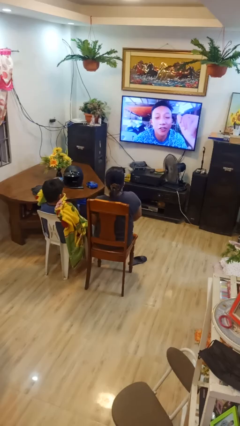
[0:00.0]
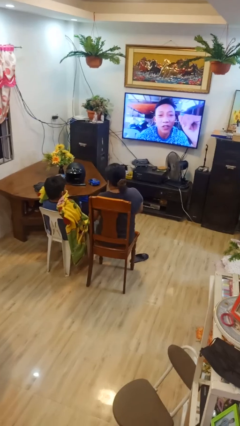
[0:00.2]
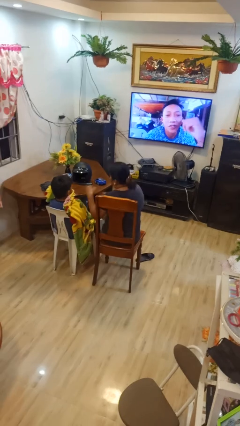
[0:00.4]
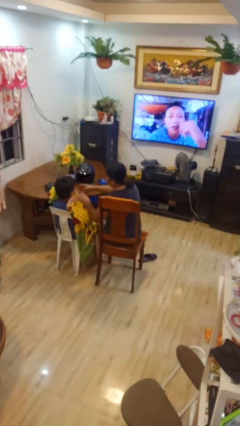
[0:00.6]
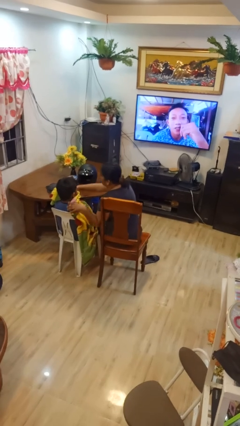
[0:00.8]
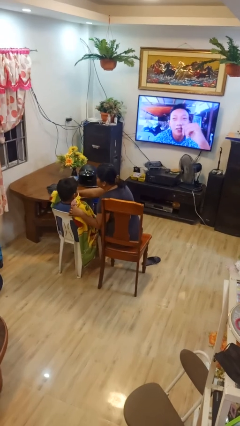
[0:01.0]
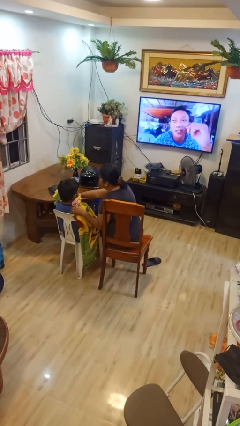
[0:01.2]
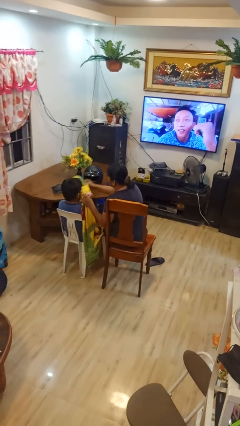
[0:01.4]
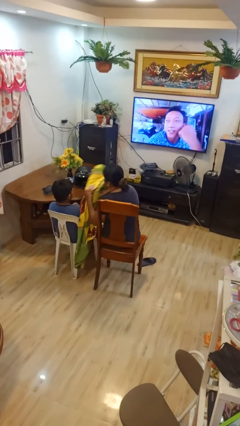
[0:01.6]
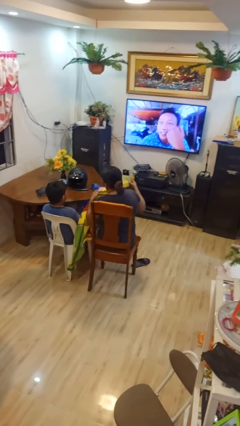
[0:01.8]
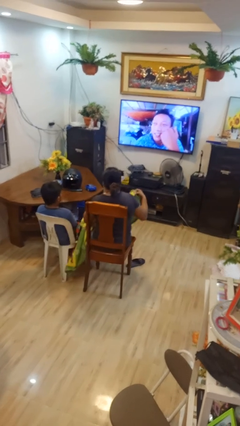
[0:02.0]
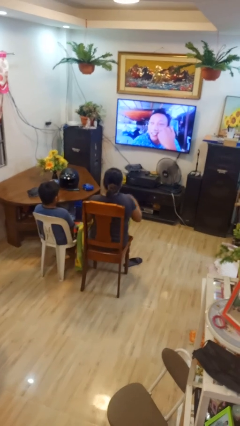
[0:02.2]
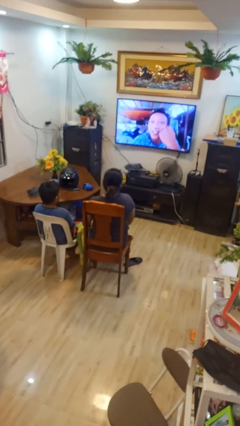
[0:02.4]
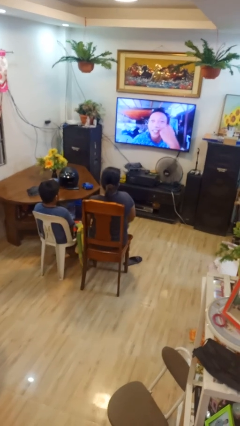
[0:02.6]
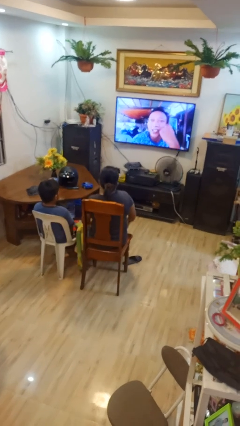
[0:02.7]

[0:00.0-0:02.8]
person uncovers friend with blanket

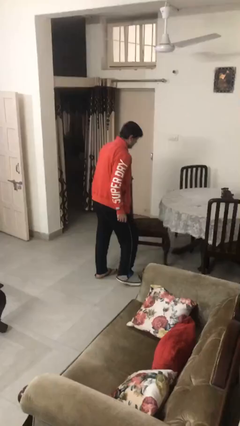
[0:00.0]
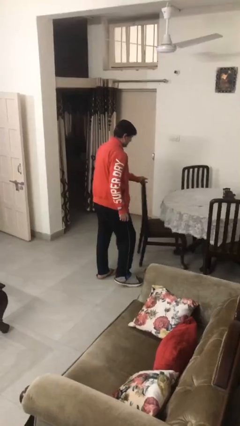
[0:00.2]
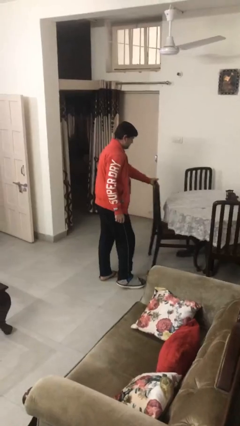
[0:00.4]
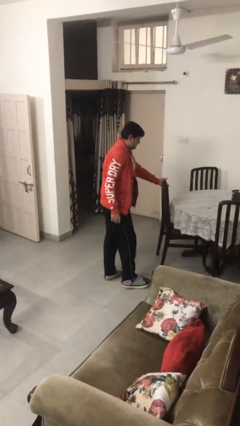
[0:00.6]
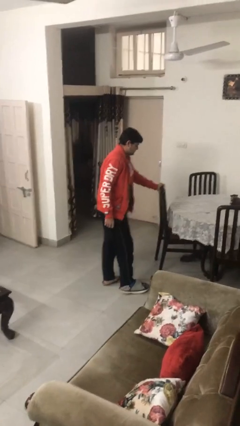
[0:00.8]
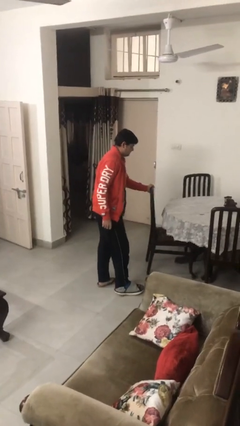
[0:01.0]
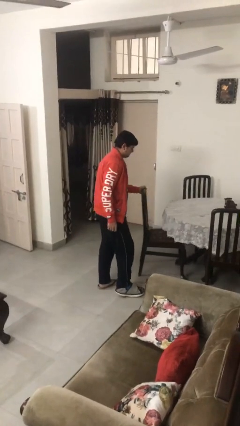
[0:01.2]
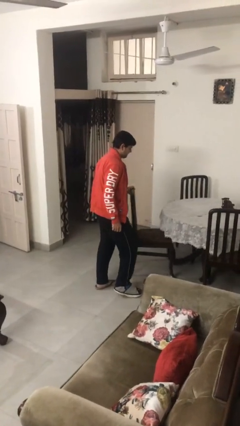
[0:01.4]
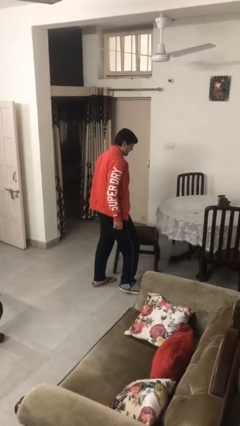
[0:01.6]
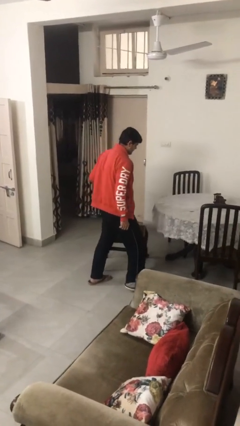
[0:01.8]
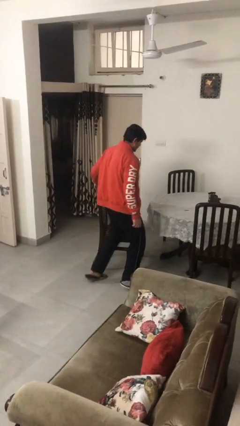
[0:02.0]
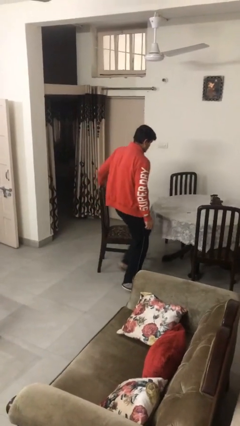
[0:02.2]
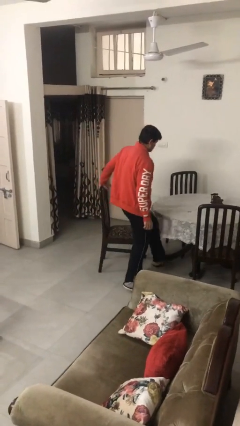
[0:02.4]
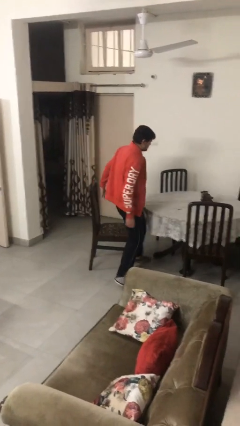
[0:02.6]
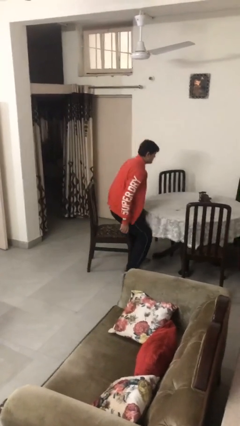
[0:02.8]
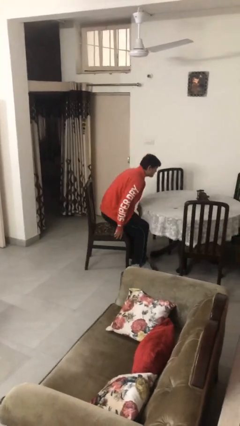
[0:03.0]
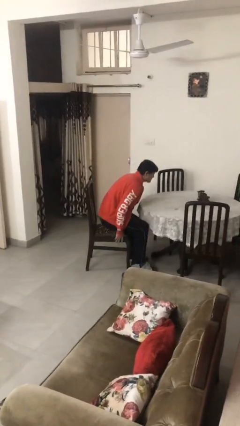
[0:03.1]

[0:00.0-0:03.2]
person sits down

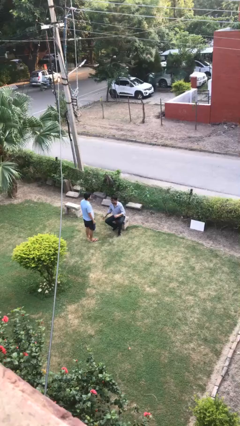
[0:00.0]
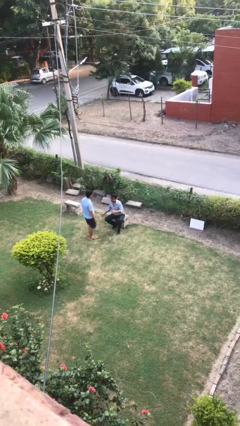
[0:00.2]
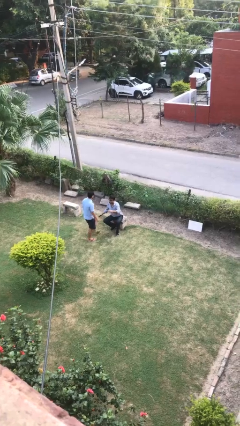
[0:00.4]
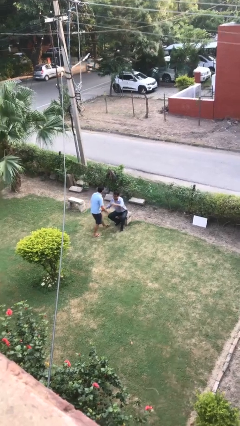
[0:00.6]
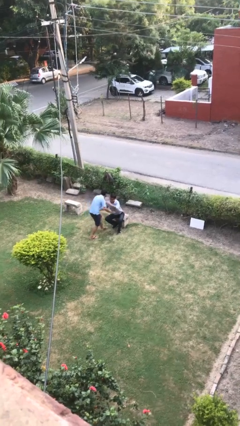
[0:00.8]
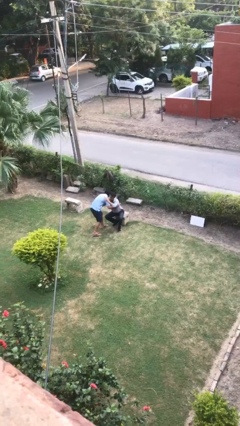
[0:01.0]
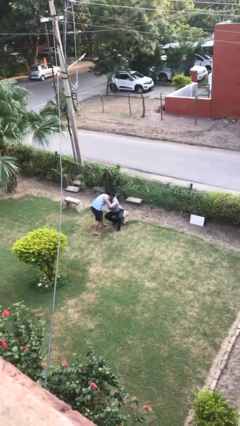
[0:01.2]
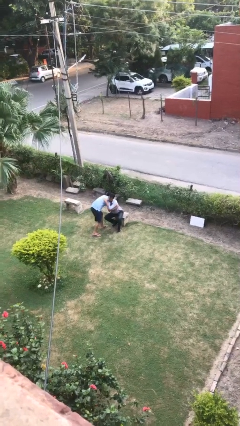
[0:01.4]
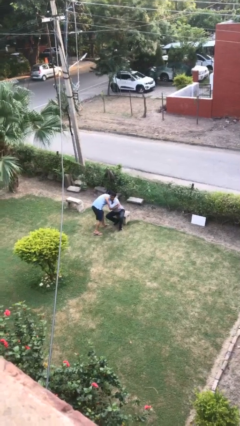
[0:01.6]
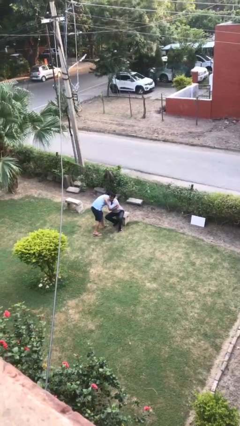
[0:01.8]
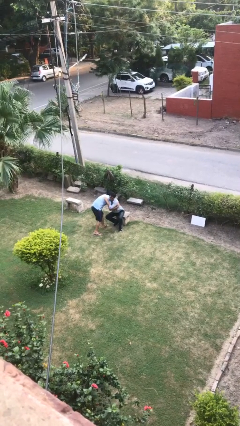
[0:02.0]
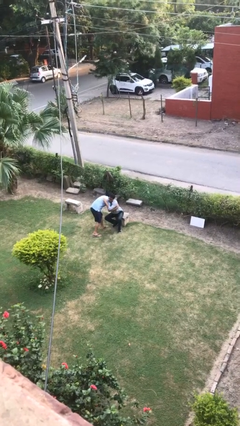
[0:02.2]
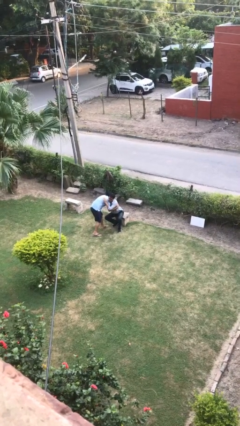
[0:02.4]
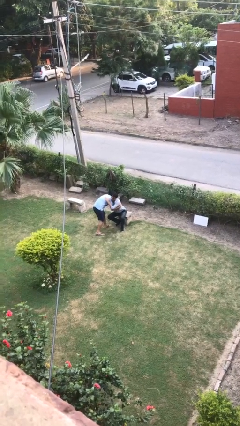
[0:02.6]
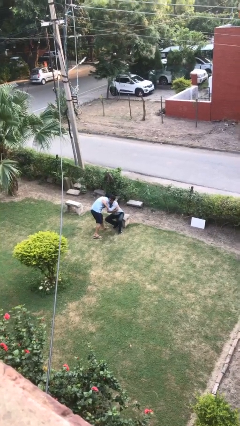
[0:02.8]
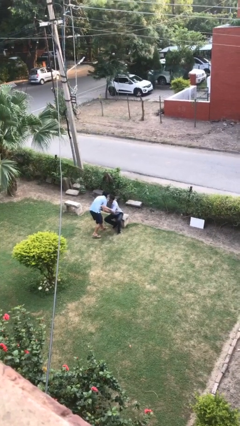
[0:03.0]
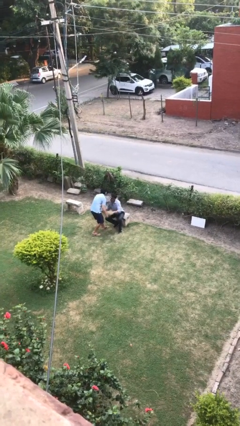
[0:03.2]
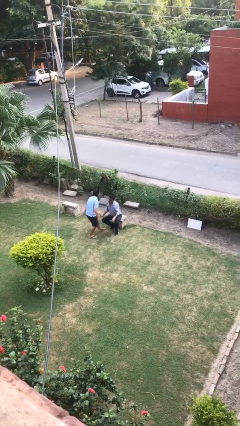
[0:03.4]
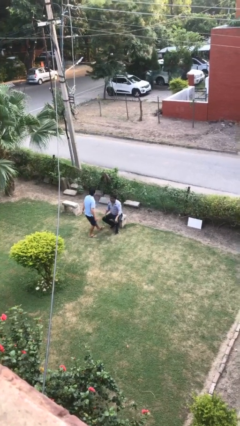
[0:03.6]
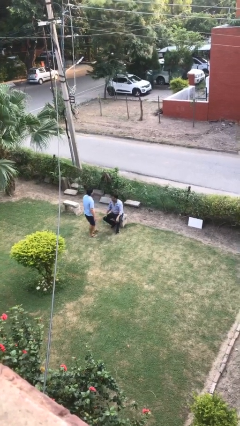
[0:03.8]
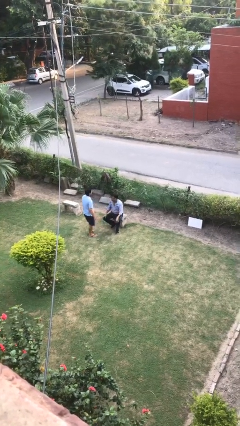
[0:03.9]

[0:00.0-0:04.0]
person embraces person

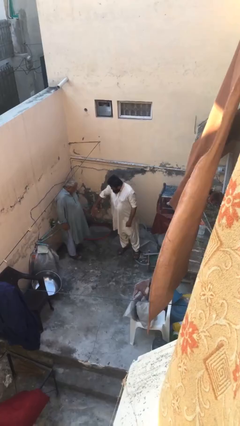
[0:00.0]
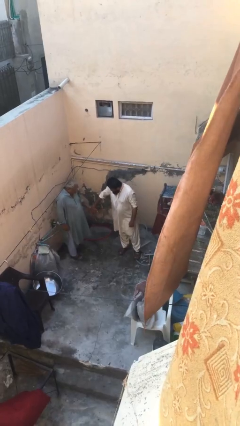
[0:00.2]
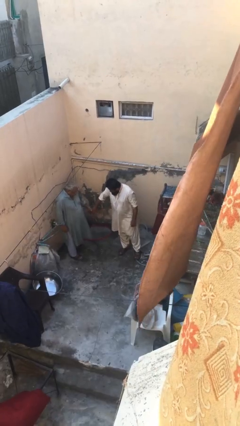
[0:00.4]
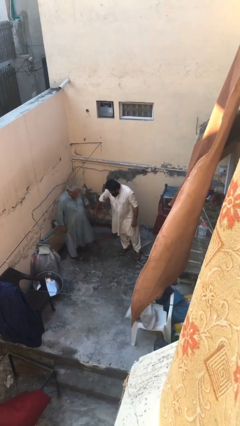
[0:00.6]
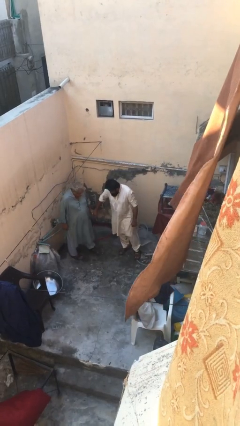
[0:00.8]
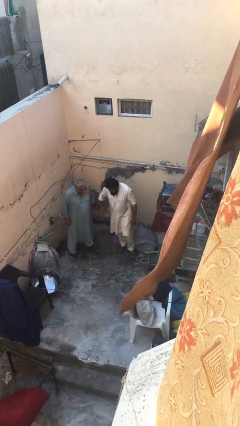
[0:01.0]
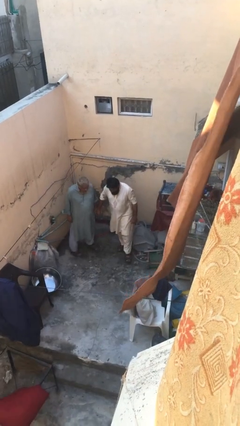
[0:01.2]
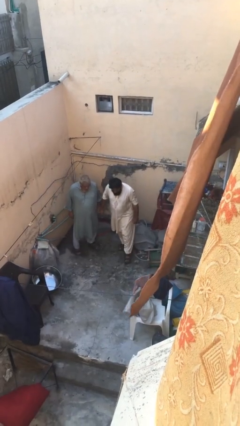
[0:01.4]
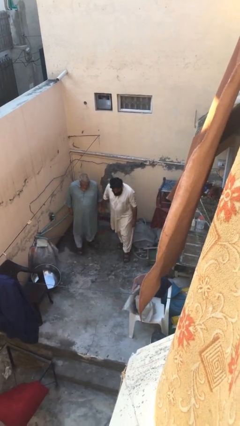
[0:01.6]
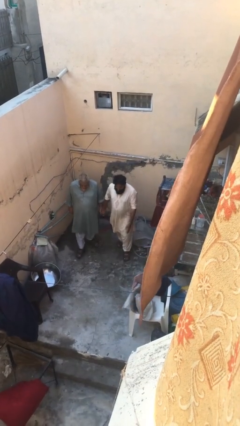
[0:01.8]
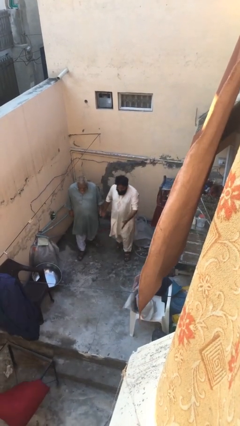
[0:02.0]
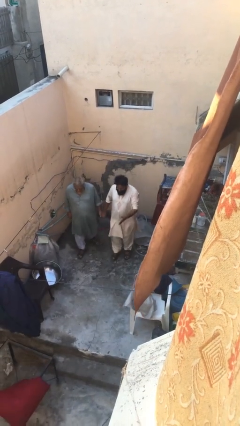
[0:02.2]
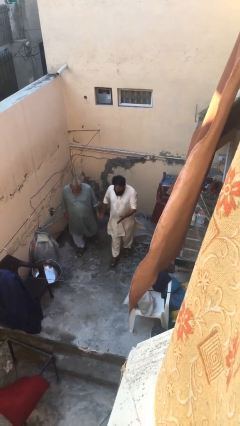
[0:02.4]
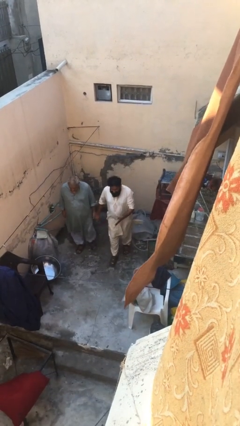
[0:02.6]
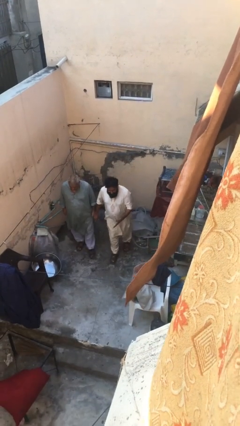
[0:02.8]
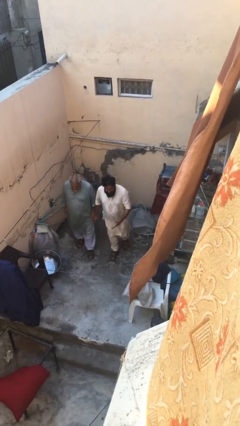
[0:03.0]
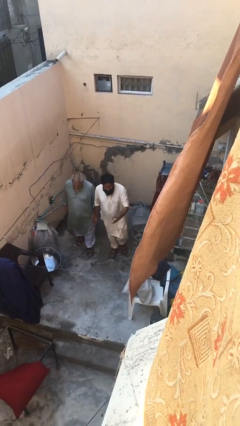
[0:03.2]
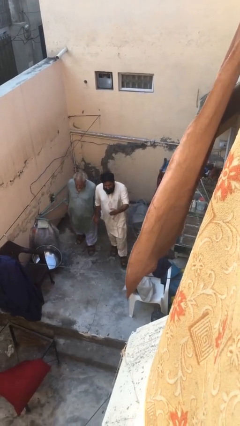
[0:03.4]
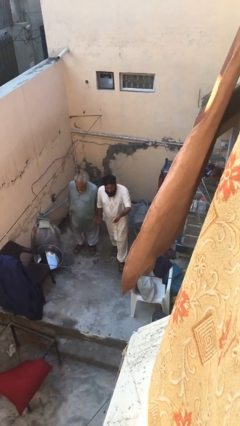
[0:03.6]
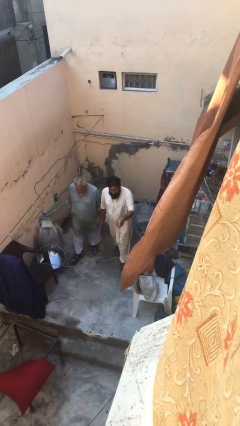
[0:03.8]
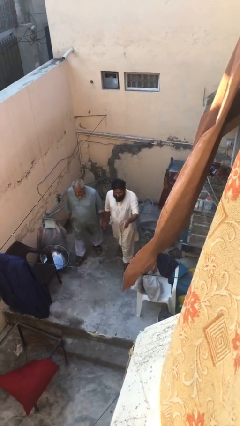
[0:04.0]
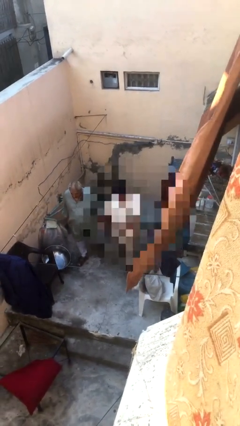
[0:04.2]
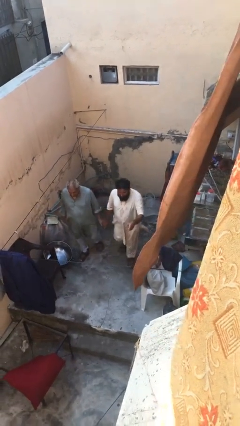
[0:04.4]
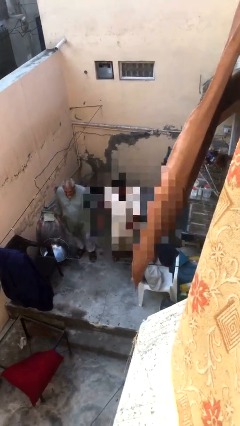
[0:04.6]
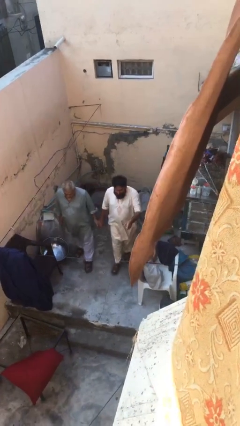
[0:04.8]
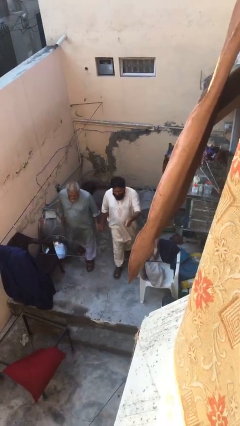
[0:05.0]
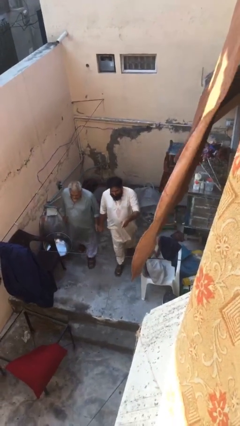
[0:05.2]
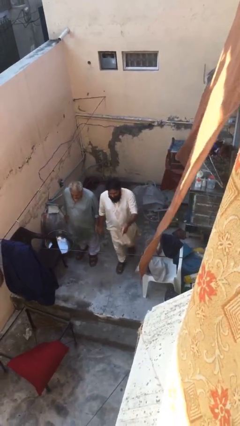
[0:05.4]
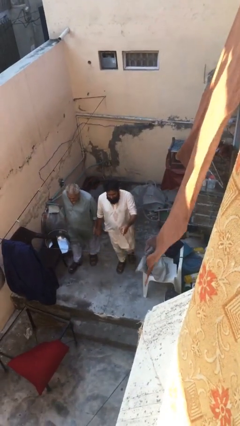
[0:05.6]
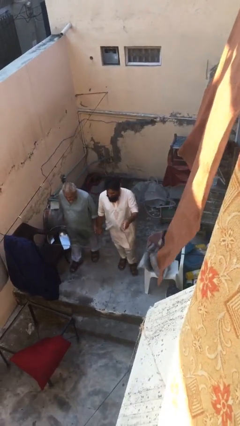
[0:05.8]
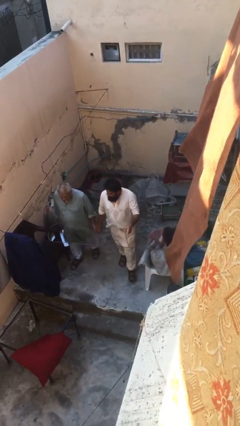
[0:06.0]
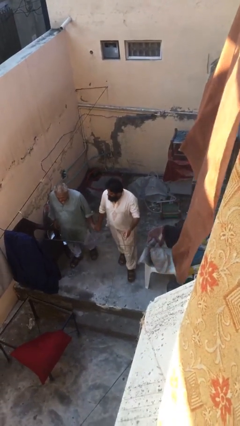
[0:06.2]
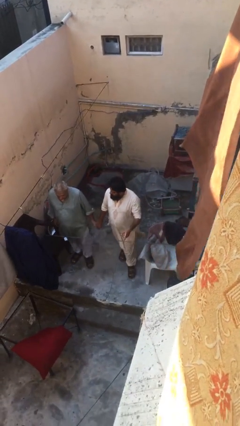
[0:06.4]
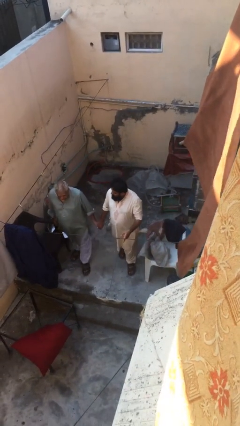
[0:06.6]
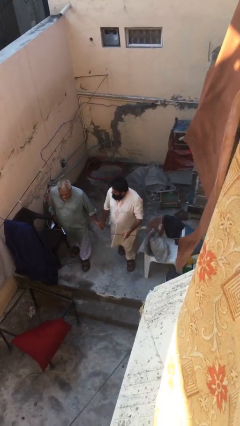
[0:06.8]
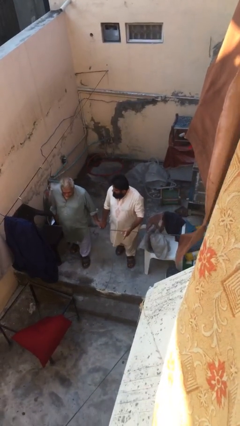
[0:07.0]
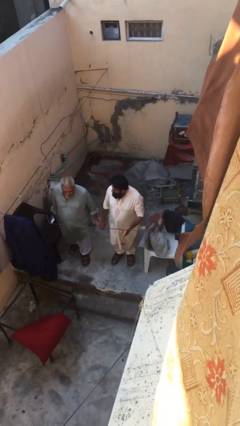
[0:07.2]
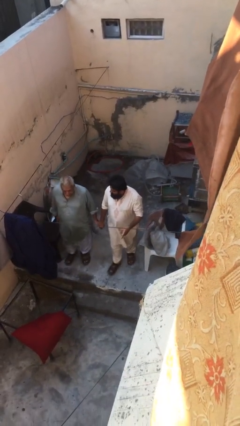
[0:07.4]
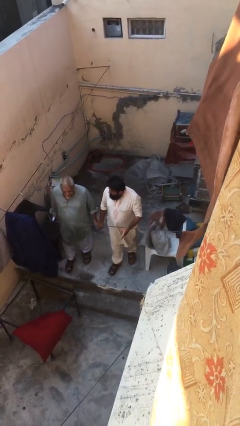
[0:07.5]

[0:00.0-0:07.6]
person holds hand
